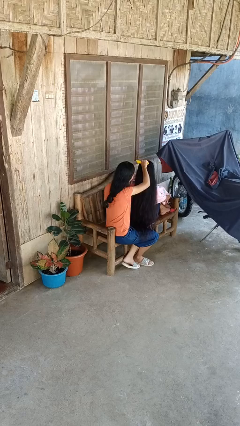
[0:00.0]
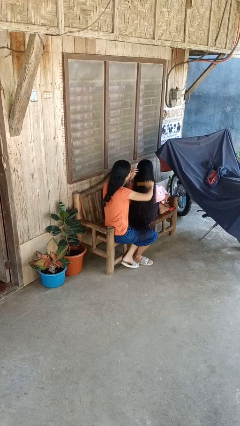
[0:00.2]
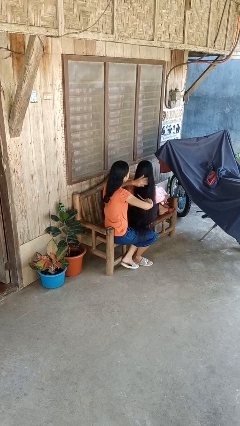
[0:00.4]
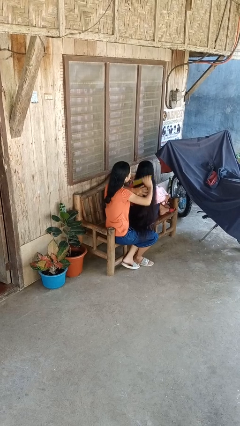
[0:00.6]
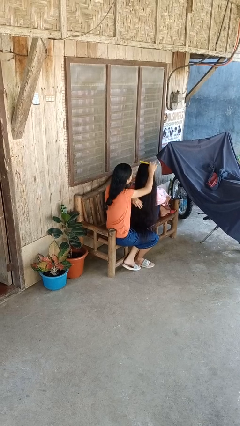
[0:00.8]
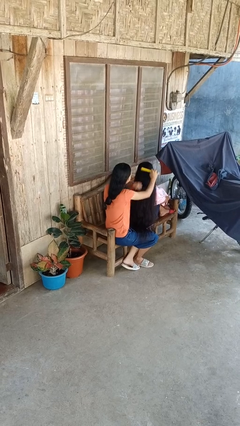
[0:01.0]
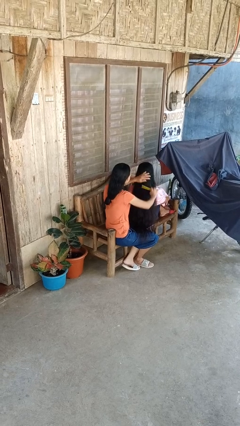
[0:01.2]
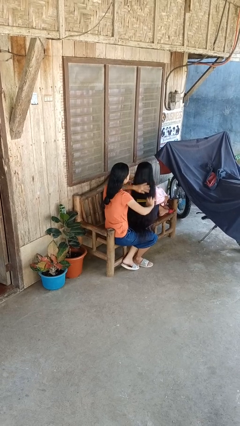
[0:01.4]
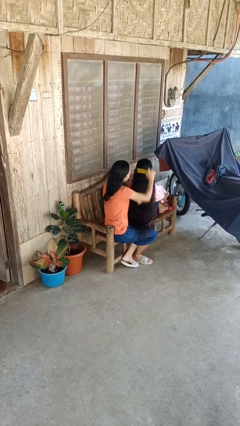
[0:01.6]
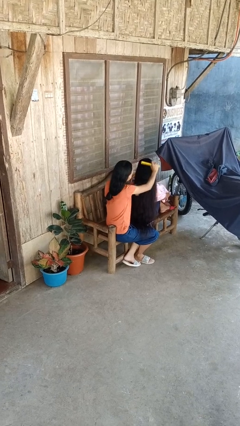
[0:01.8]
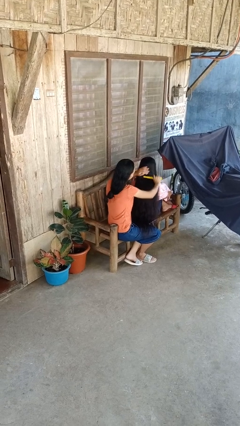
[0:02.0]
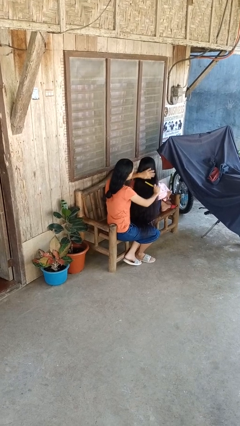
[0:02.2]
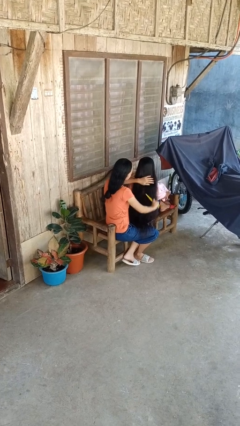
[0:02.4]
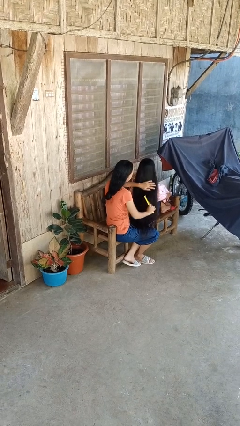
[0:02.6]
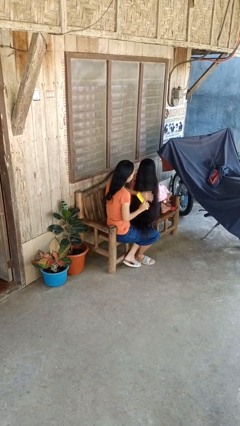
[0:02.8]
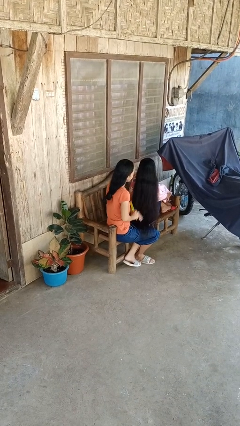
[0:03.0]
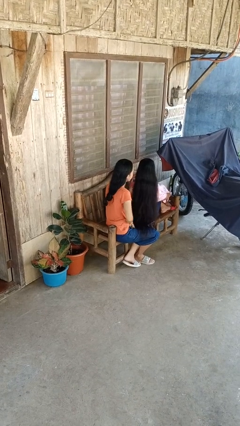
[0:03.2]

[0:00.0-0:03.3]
person brushes hair of person

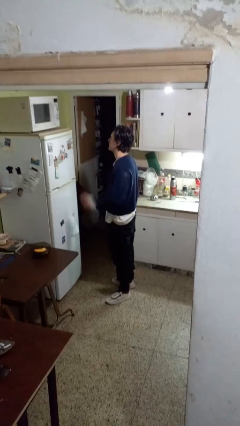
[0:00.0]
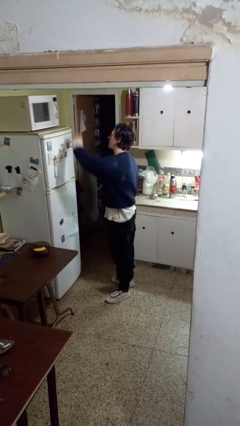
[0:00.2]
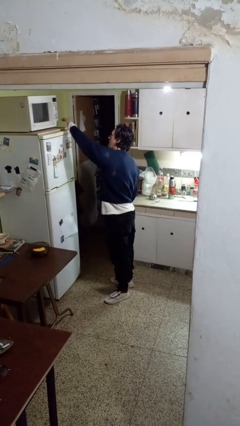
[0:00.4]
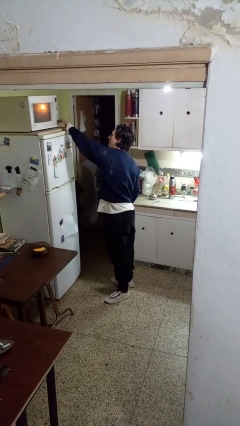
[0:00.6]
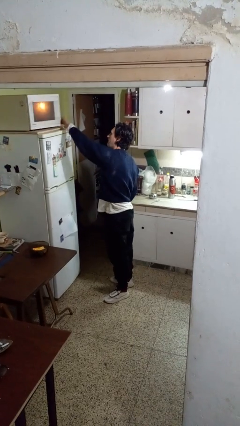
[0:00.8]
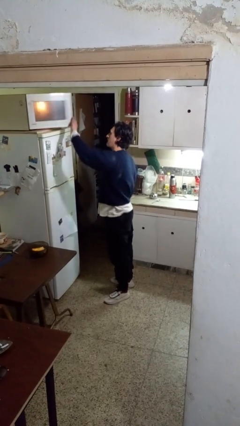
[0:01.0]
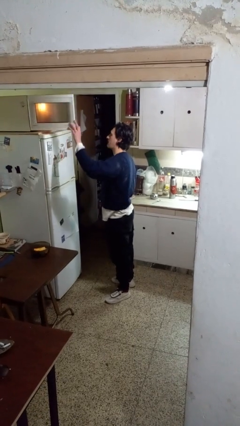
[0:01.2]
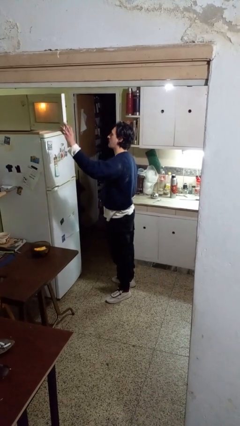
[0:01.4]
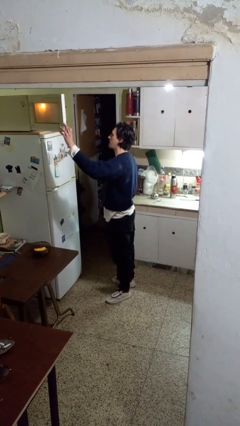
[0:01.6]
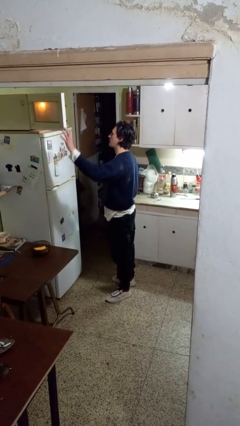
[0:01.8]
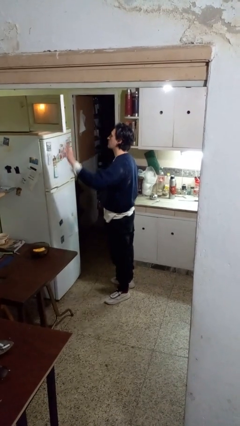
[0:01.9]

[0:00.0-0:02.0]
person opens microwave

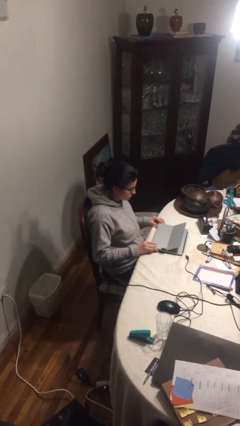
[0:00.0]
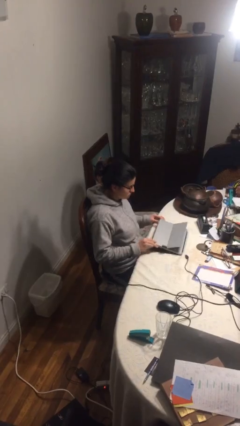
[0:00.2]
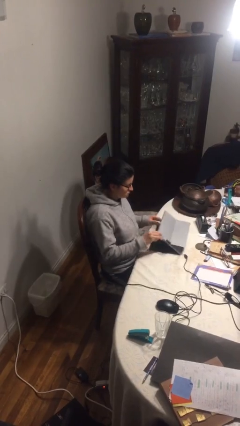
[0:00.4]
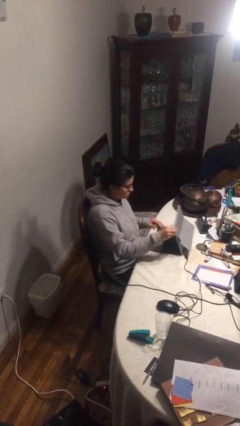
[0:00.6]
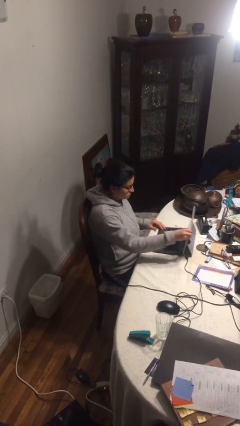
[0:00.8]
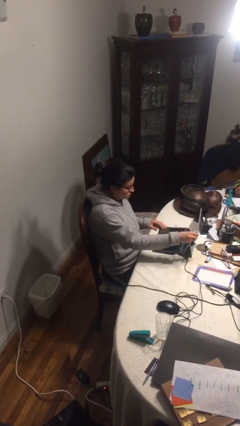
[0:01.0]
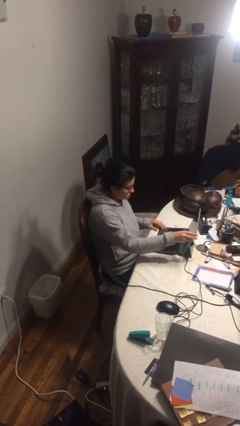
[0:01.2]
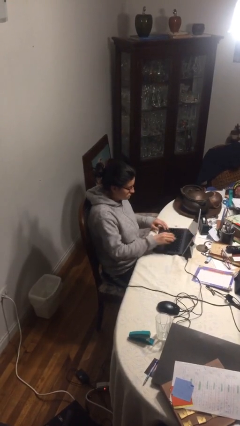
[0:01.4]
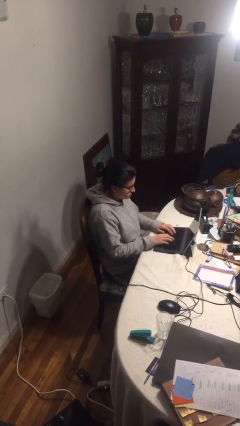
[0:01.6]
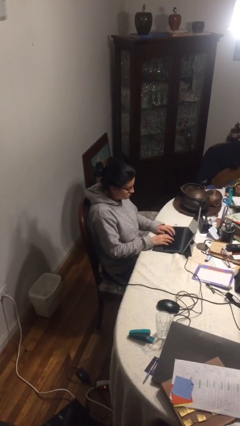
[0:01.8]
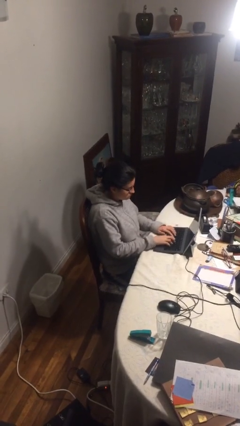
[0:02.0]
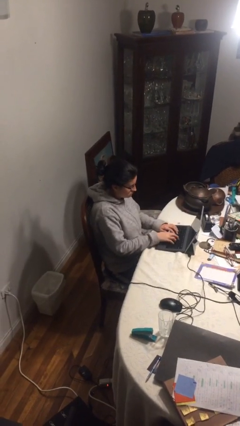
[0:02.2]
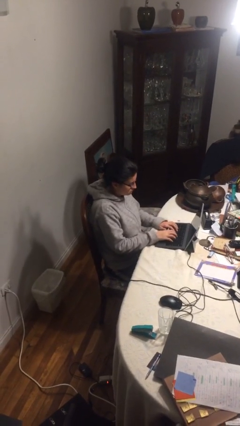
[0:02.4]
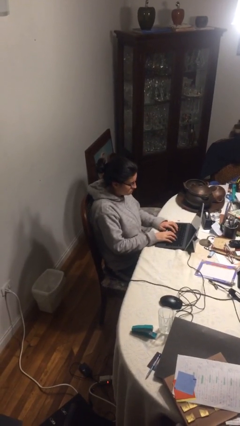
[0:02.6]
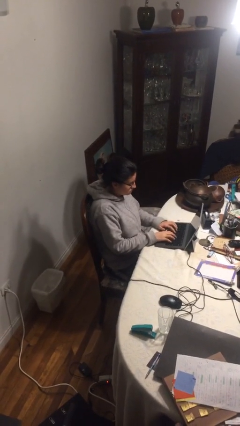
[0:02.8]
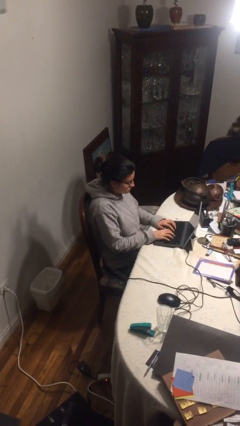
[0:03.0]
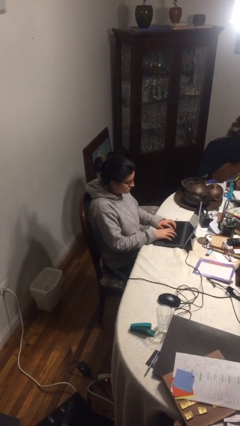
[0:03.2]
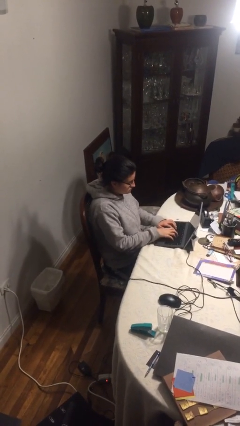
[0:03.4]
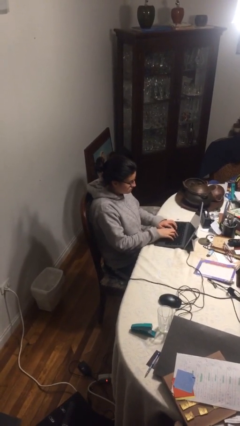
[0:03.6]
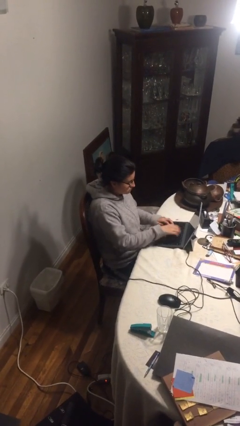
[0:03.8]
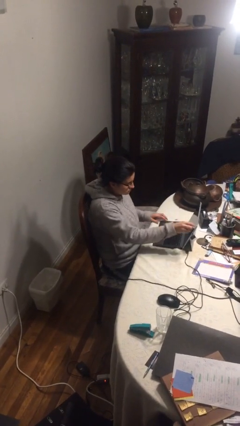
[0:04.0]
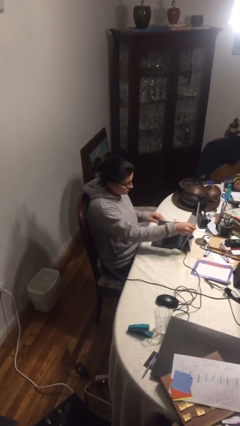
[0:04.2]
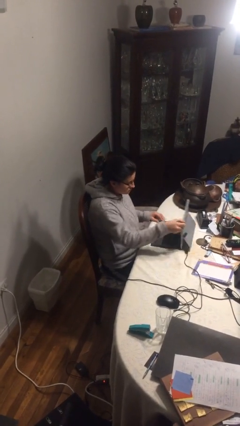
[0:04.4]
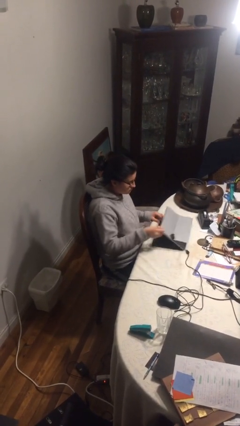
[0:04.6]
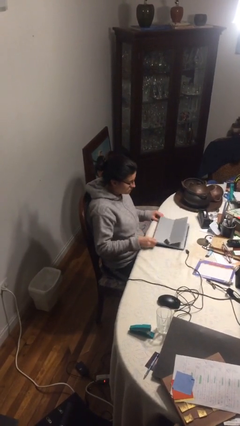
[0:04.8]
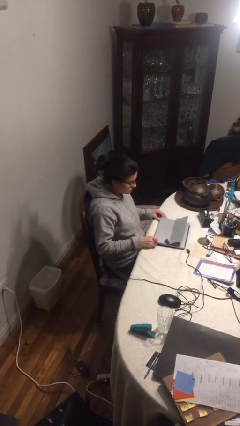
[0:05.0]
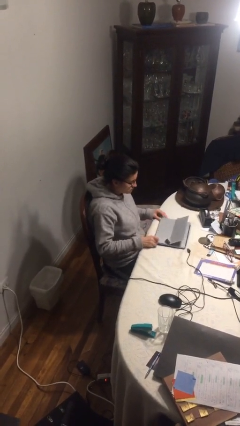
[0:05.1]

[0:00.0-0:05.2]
person interacts with laptop

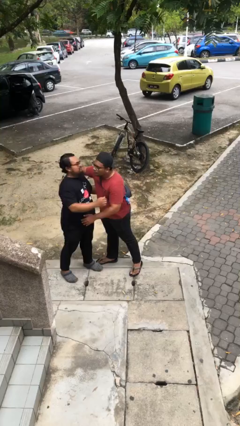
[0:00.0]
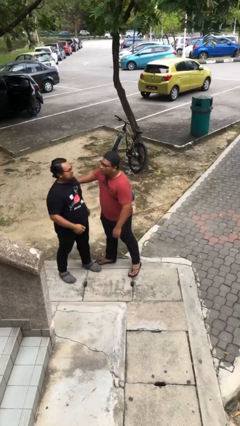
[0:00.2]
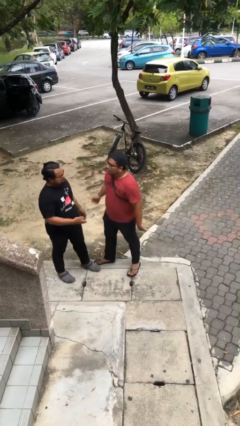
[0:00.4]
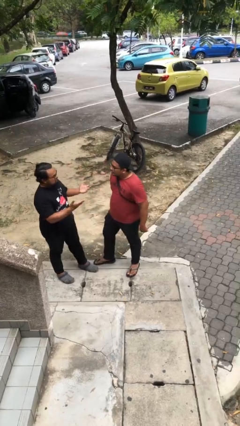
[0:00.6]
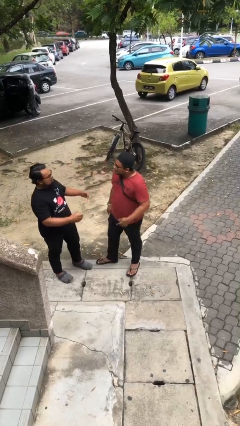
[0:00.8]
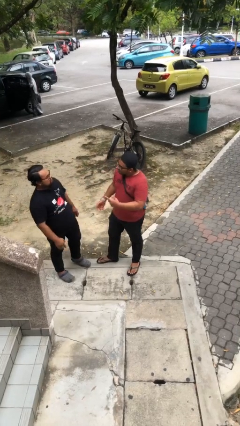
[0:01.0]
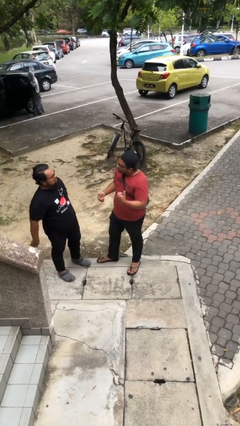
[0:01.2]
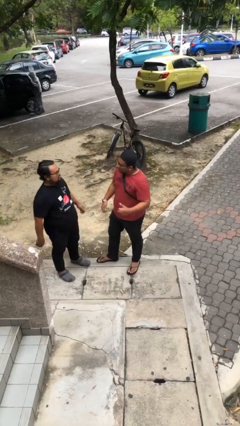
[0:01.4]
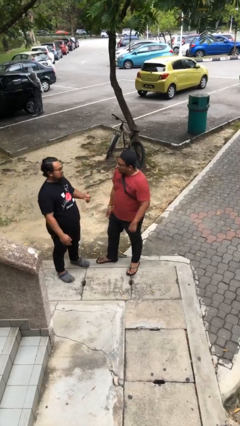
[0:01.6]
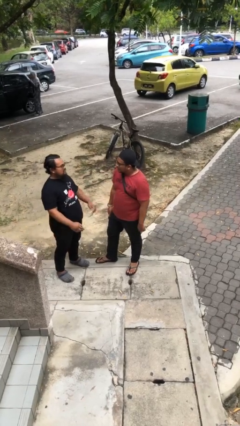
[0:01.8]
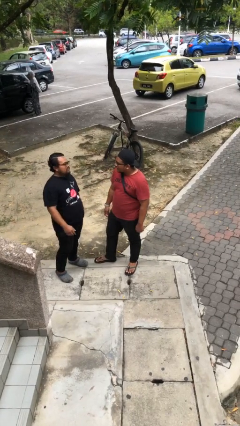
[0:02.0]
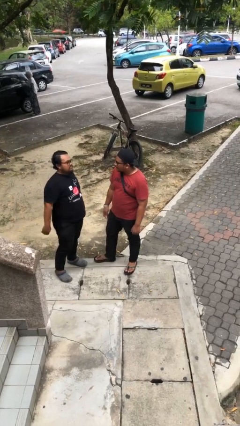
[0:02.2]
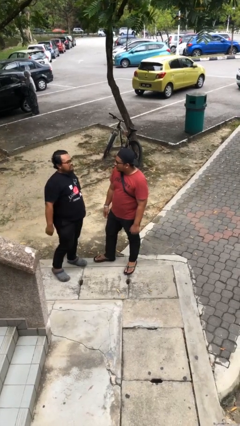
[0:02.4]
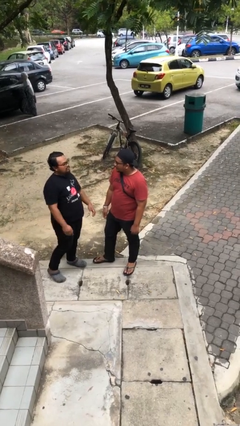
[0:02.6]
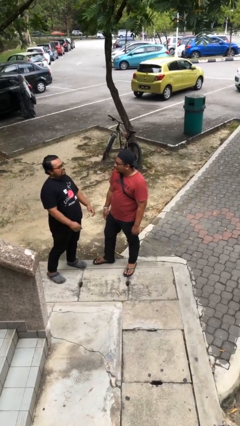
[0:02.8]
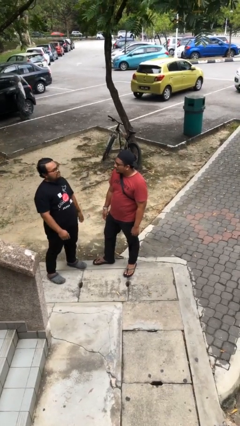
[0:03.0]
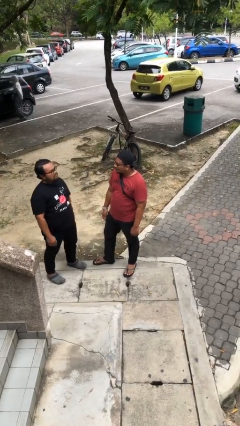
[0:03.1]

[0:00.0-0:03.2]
person talks to person

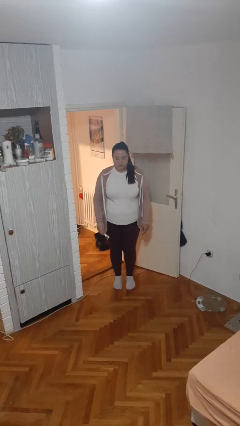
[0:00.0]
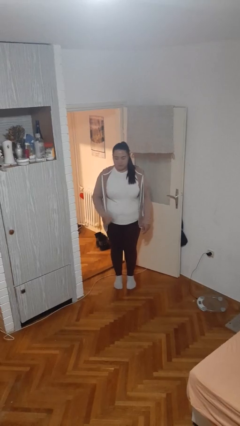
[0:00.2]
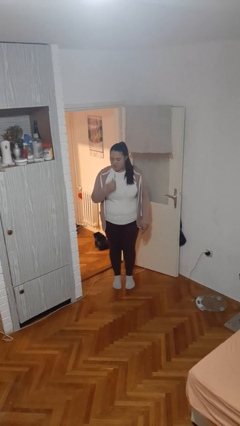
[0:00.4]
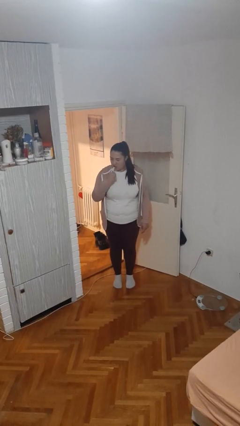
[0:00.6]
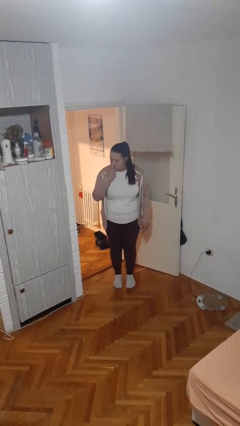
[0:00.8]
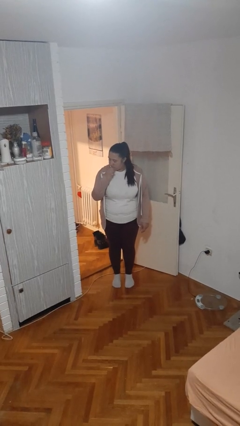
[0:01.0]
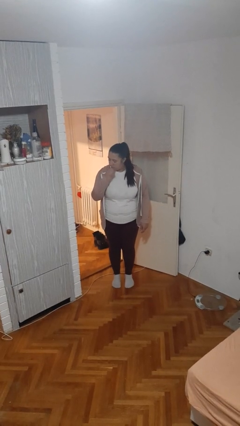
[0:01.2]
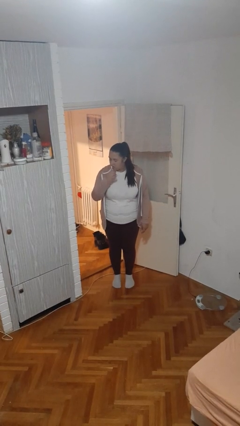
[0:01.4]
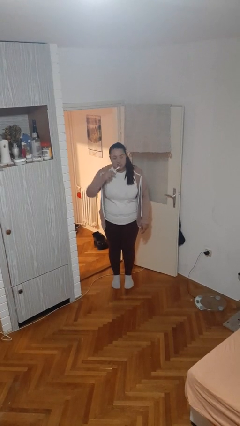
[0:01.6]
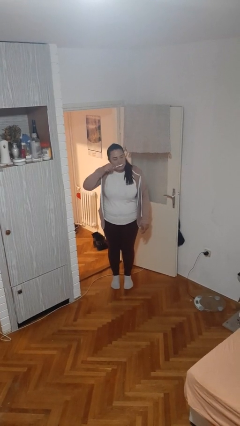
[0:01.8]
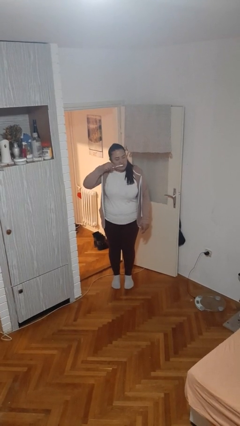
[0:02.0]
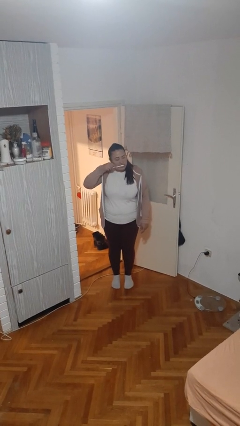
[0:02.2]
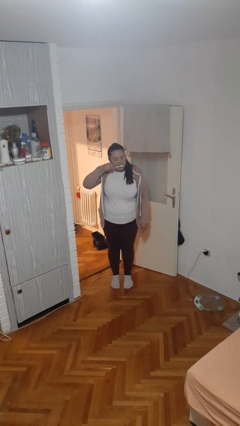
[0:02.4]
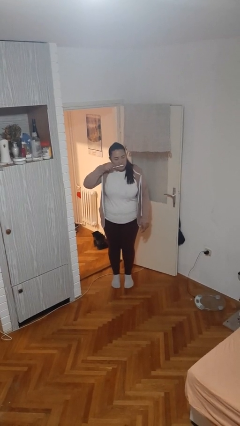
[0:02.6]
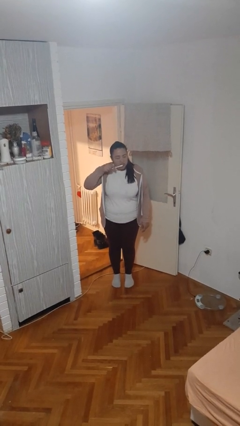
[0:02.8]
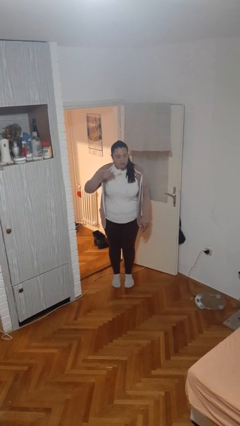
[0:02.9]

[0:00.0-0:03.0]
person brushes hair

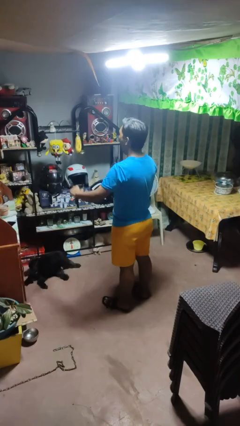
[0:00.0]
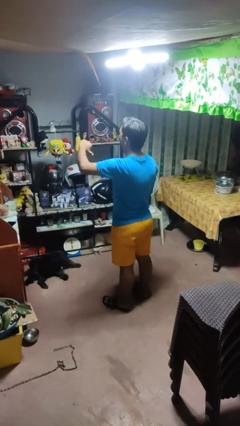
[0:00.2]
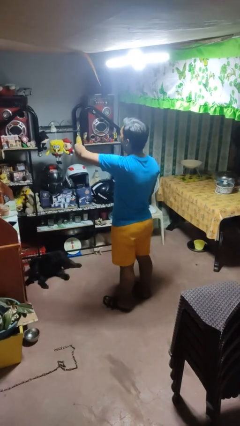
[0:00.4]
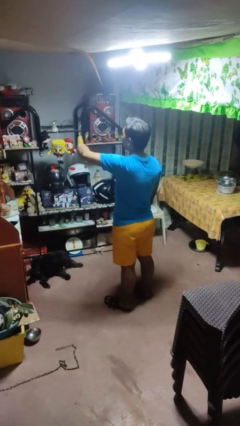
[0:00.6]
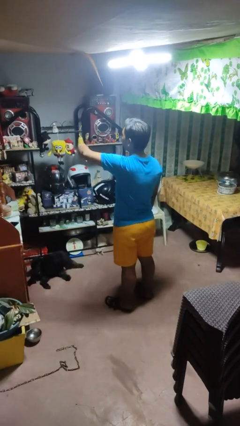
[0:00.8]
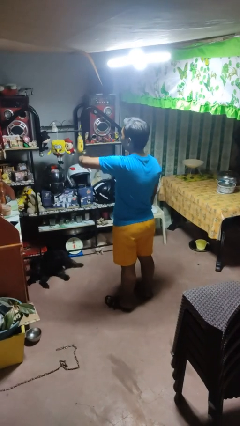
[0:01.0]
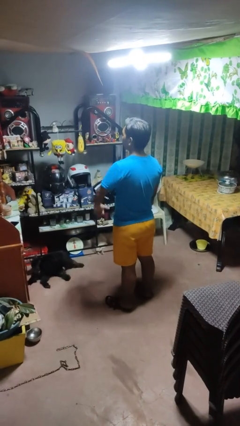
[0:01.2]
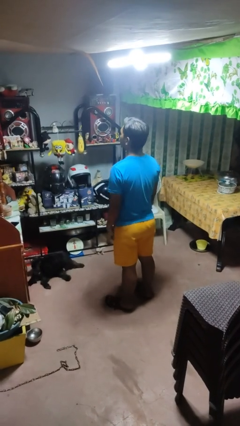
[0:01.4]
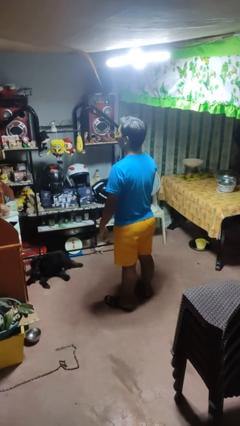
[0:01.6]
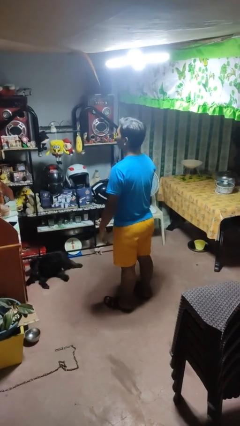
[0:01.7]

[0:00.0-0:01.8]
person gestures thumbs down
